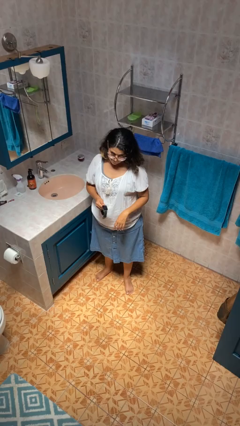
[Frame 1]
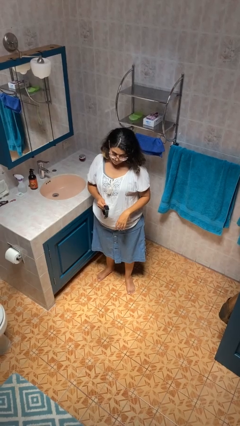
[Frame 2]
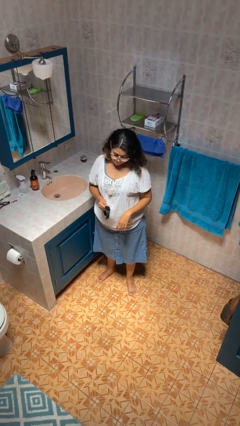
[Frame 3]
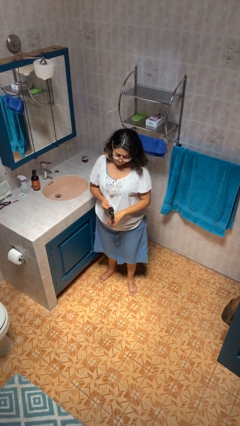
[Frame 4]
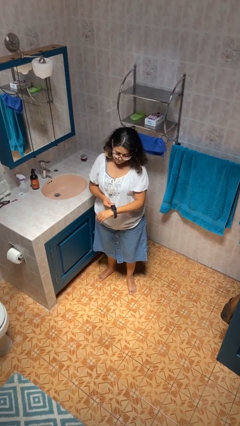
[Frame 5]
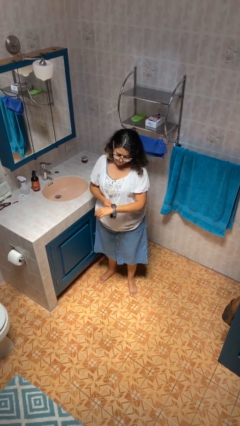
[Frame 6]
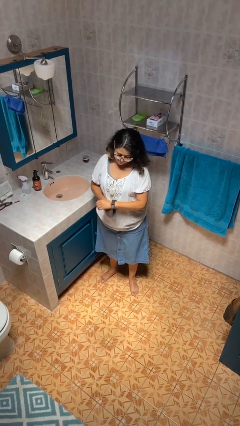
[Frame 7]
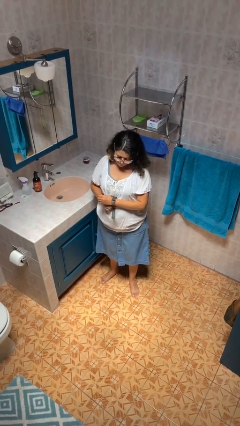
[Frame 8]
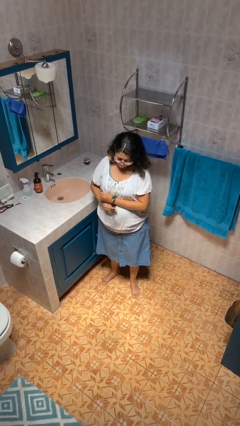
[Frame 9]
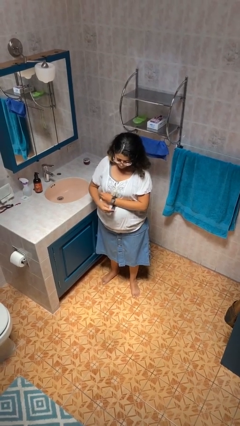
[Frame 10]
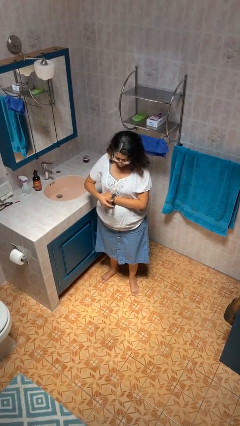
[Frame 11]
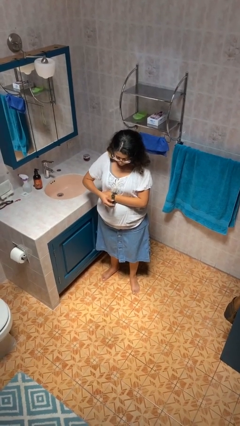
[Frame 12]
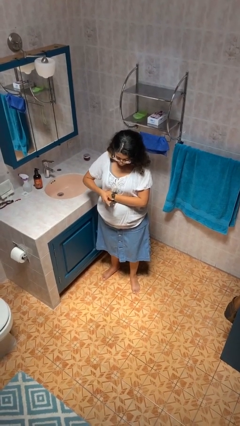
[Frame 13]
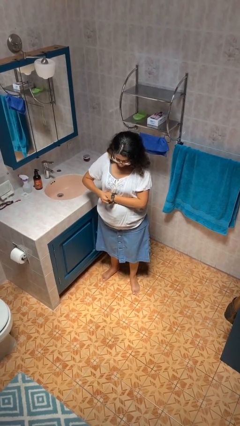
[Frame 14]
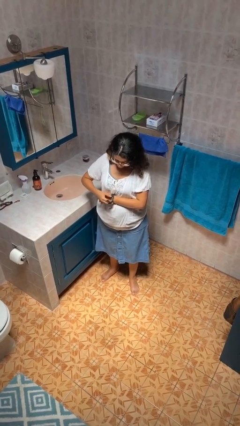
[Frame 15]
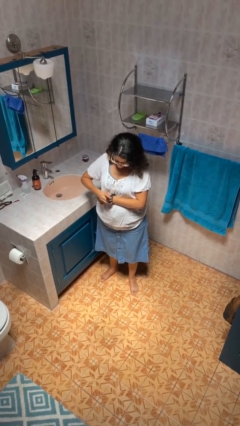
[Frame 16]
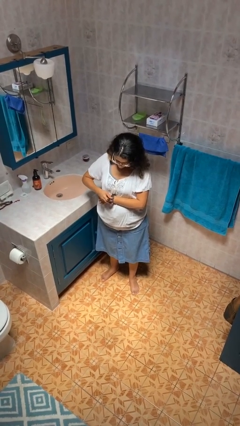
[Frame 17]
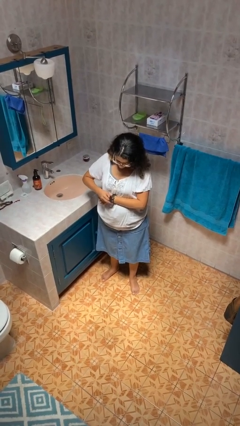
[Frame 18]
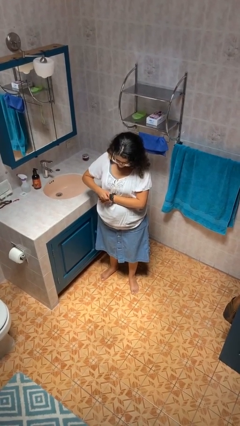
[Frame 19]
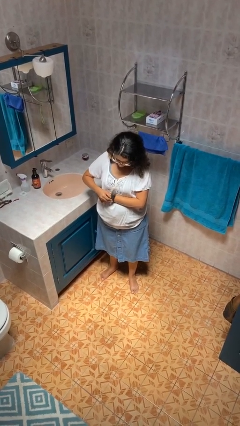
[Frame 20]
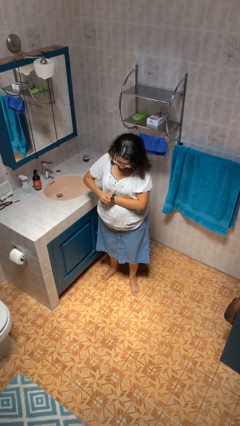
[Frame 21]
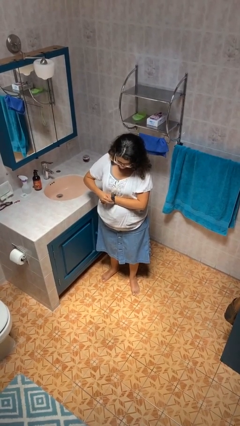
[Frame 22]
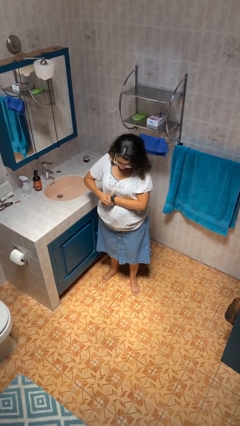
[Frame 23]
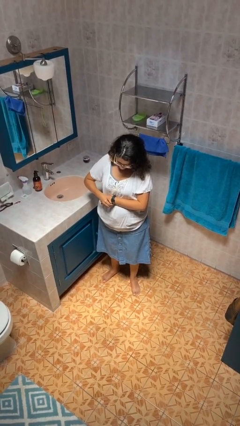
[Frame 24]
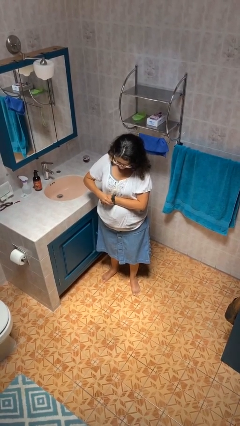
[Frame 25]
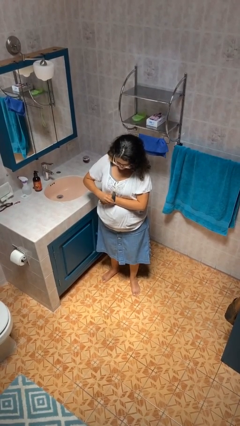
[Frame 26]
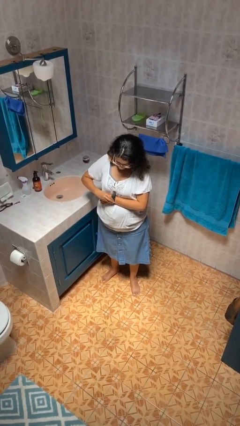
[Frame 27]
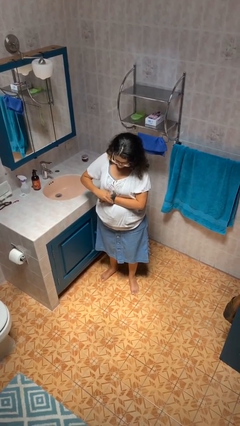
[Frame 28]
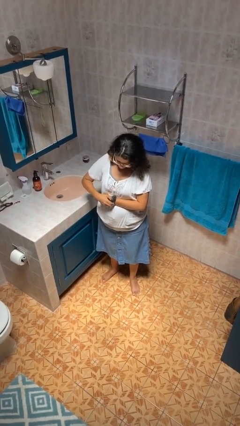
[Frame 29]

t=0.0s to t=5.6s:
person puts on wristwatch

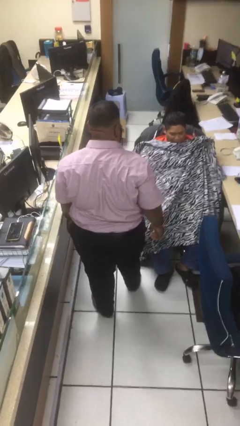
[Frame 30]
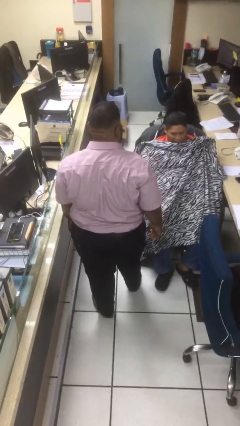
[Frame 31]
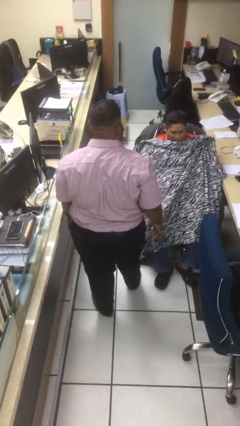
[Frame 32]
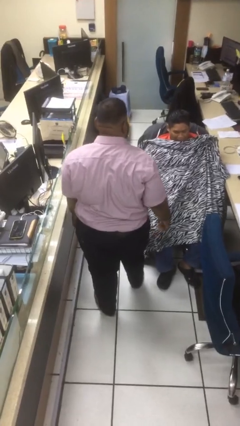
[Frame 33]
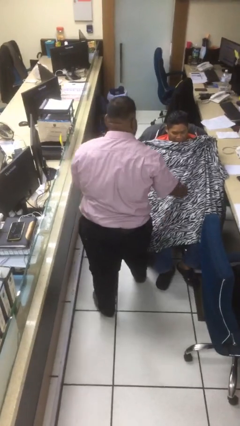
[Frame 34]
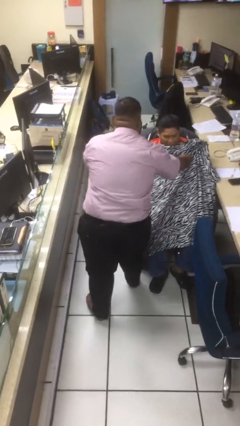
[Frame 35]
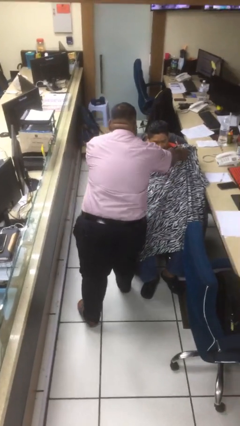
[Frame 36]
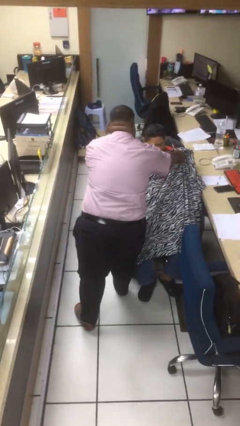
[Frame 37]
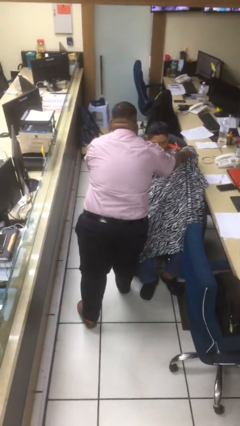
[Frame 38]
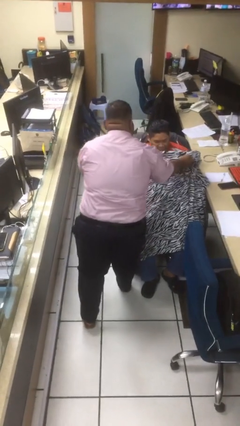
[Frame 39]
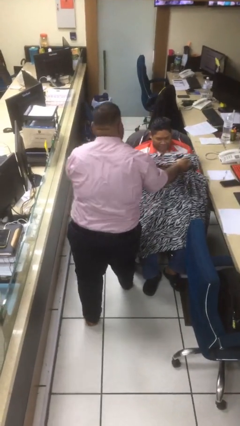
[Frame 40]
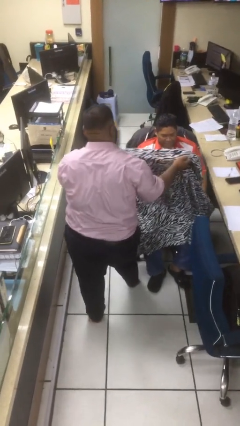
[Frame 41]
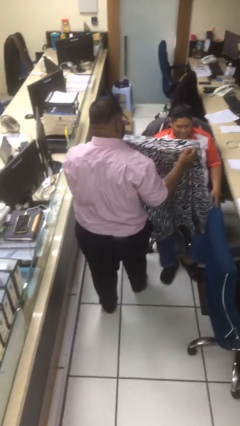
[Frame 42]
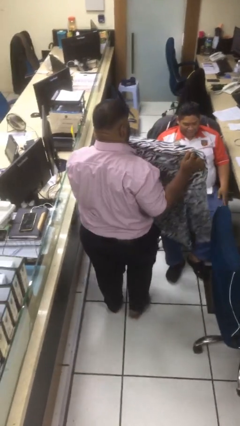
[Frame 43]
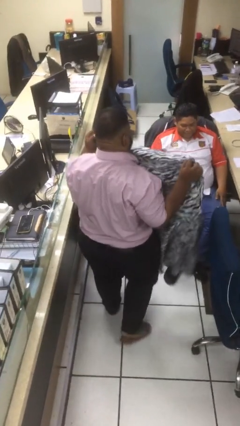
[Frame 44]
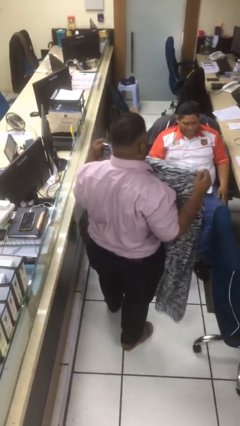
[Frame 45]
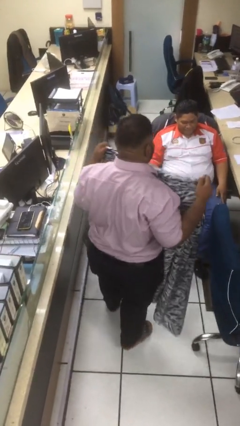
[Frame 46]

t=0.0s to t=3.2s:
person uncovers friend with blanket

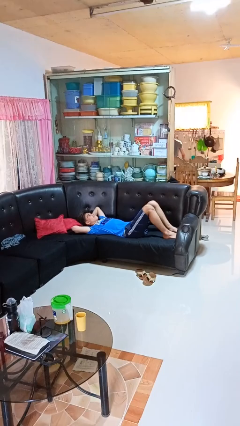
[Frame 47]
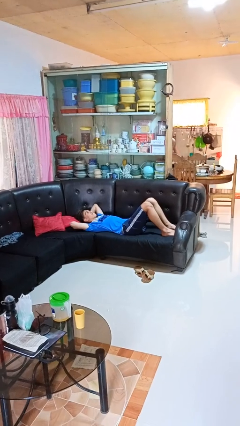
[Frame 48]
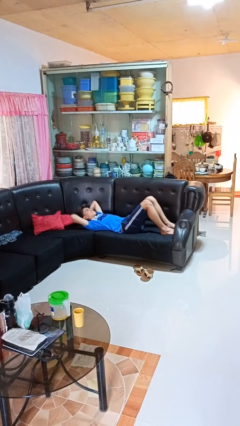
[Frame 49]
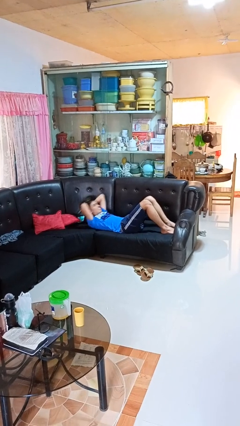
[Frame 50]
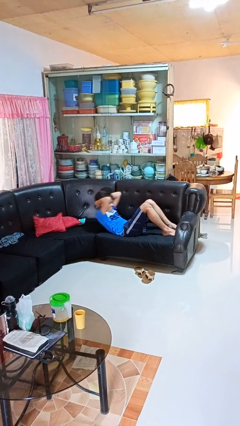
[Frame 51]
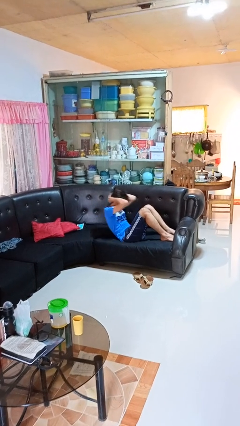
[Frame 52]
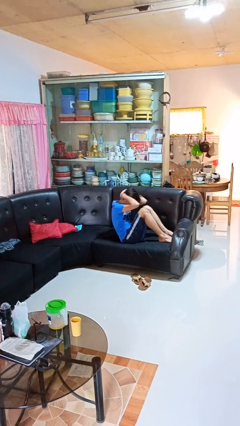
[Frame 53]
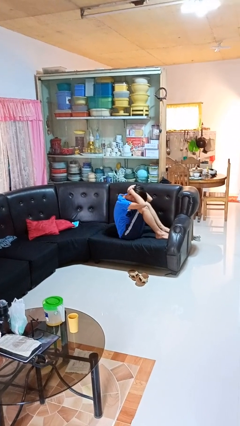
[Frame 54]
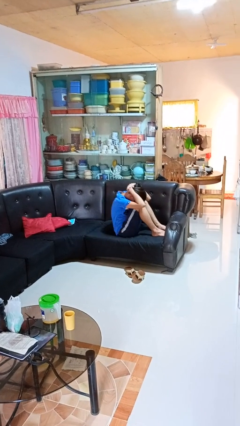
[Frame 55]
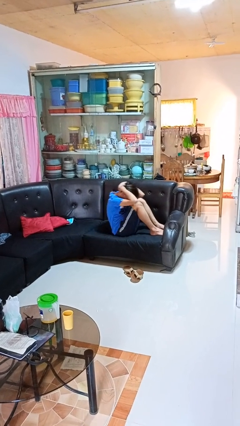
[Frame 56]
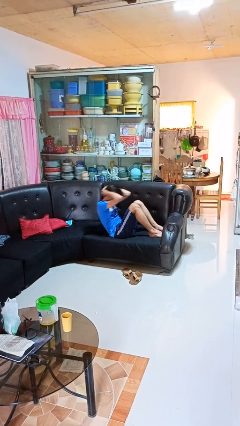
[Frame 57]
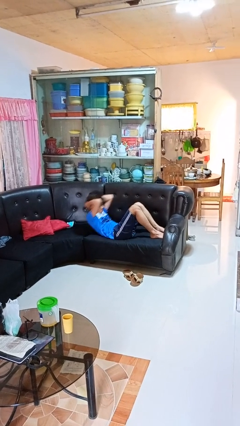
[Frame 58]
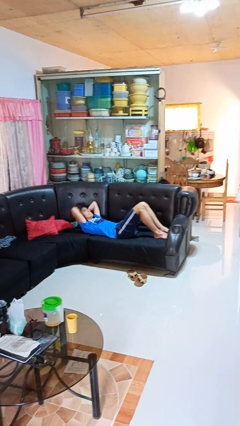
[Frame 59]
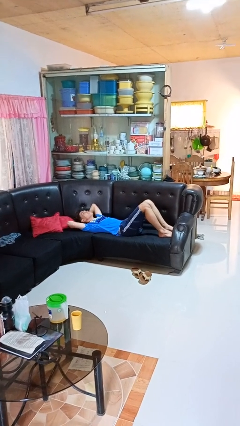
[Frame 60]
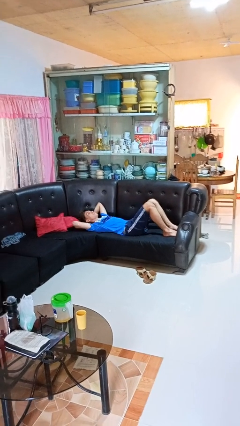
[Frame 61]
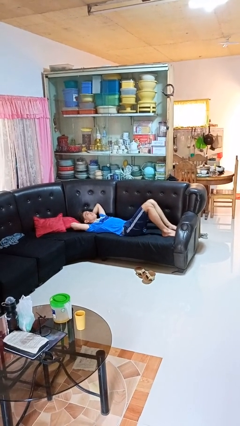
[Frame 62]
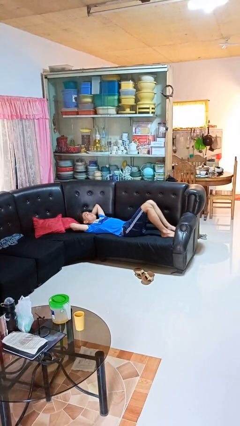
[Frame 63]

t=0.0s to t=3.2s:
person exercises with situp

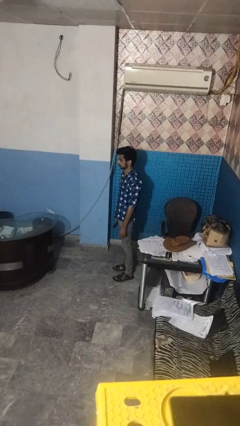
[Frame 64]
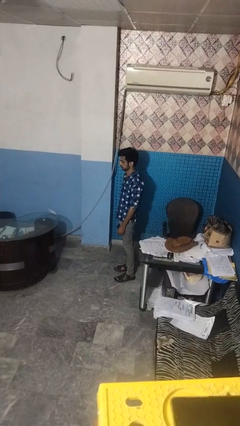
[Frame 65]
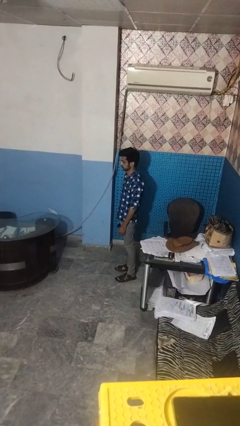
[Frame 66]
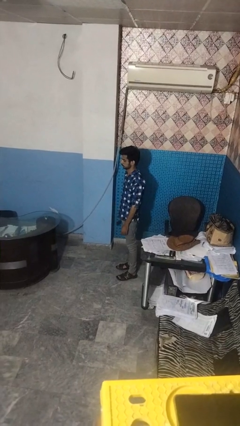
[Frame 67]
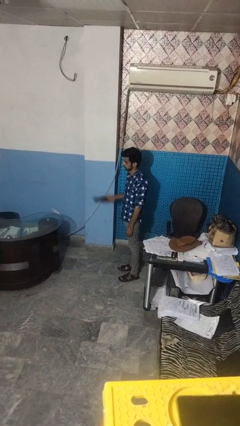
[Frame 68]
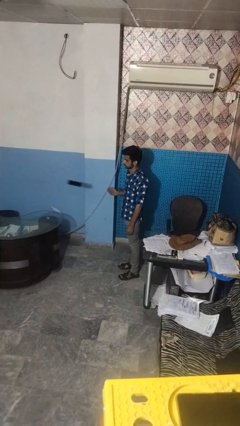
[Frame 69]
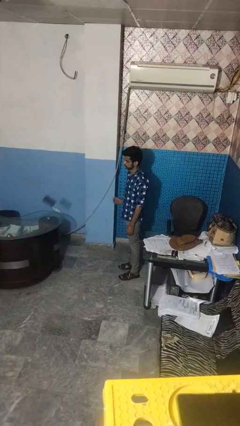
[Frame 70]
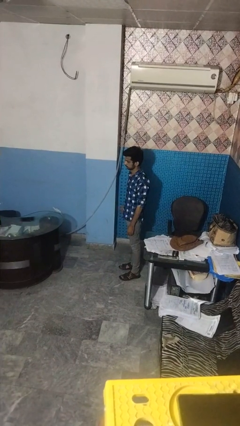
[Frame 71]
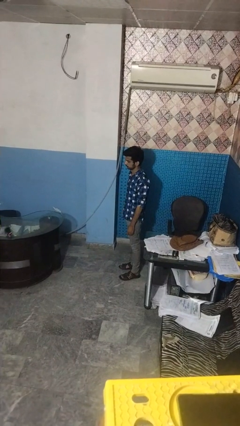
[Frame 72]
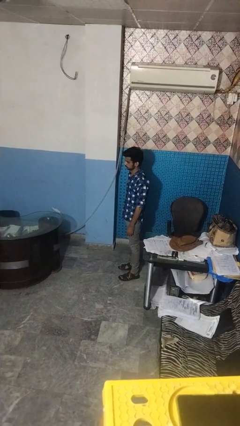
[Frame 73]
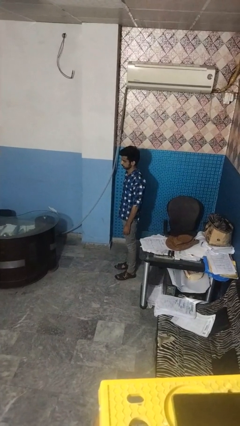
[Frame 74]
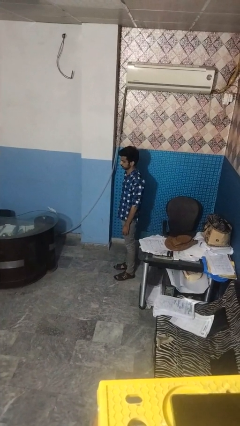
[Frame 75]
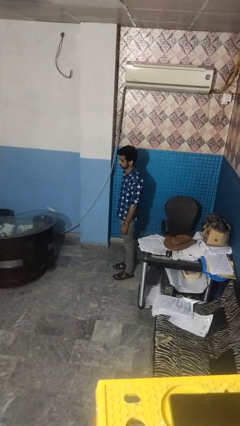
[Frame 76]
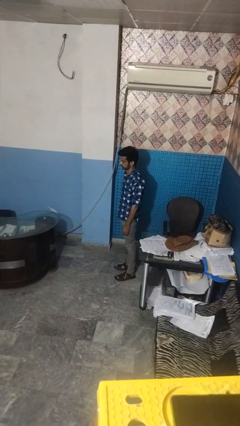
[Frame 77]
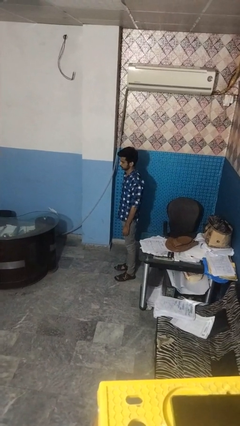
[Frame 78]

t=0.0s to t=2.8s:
person throws object on table

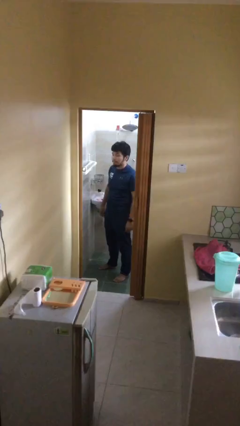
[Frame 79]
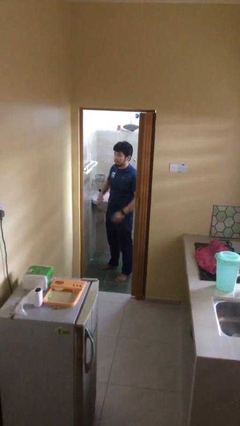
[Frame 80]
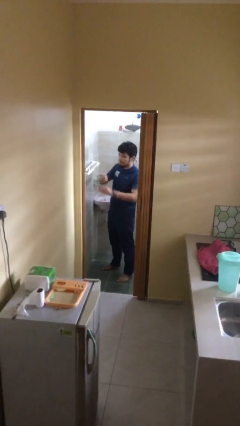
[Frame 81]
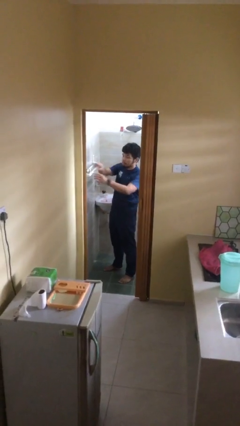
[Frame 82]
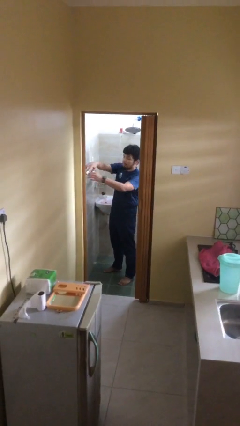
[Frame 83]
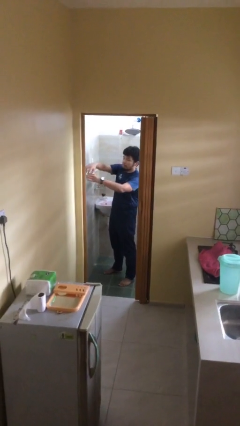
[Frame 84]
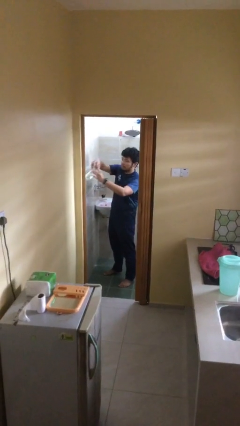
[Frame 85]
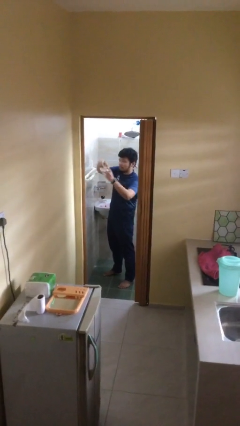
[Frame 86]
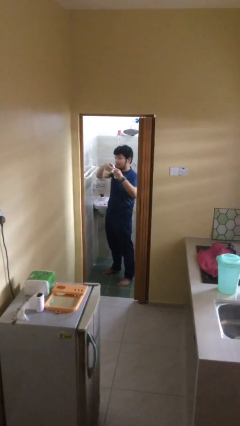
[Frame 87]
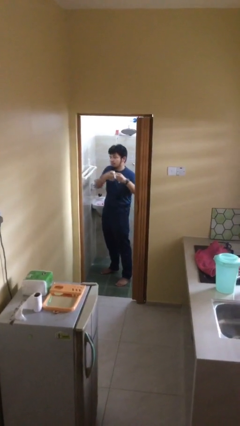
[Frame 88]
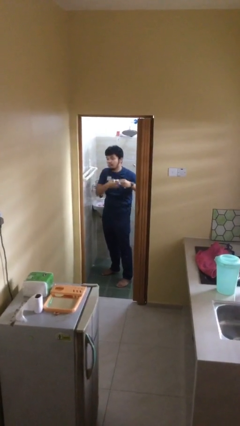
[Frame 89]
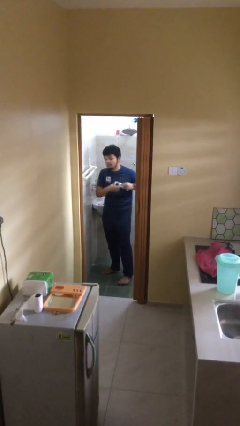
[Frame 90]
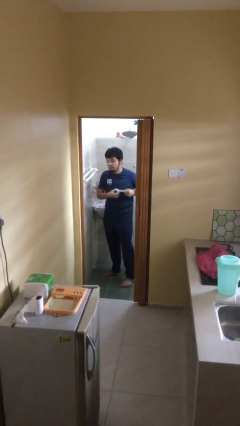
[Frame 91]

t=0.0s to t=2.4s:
person picks up object from countertop

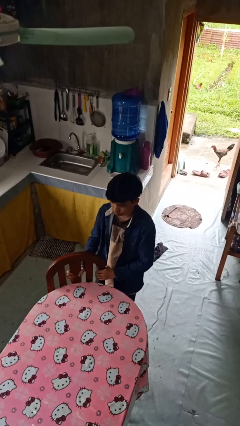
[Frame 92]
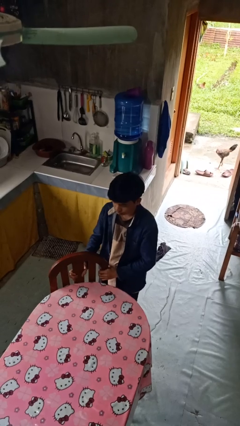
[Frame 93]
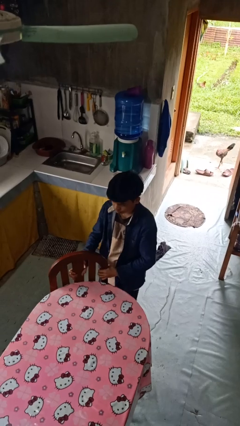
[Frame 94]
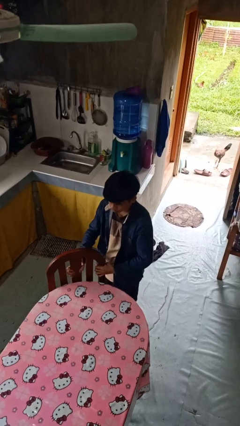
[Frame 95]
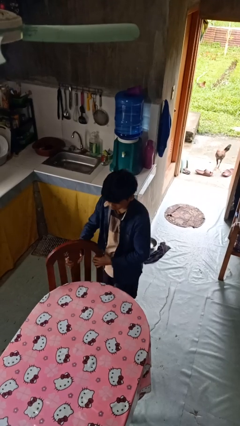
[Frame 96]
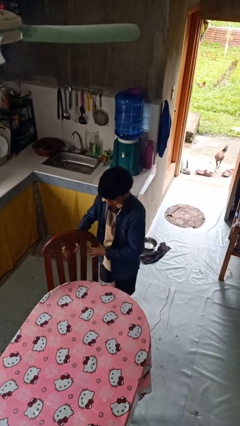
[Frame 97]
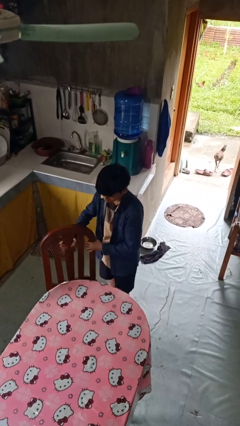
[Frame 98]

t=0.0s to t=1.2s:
person pulls out chair
